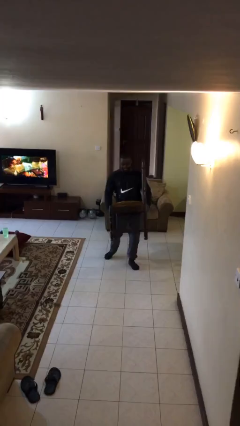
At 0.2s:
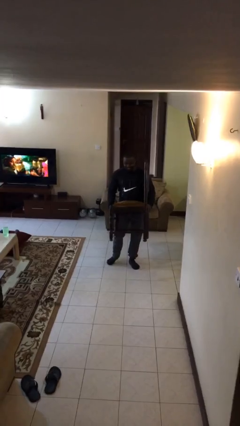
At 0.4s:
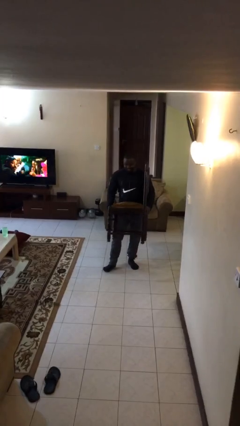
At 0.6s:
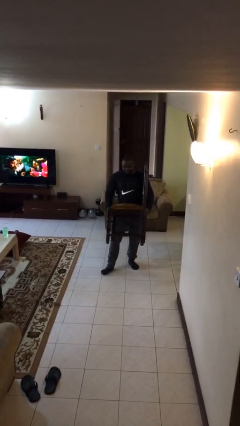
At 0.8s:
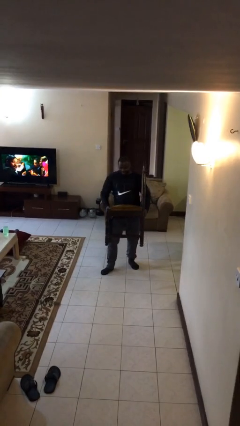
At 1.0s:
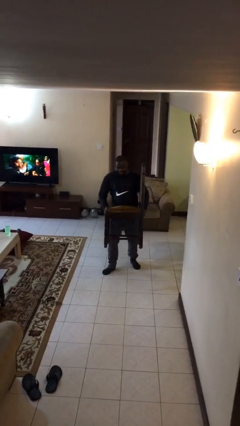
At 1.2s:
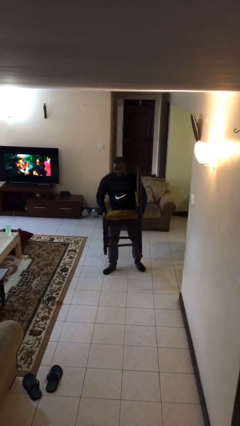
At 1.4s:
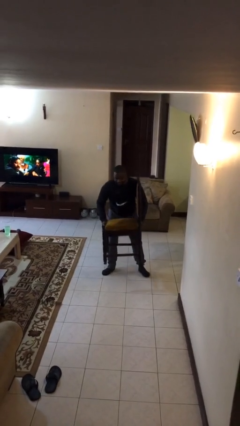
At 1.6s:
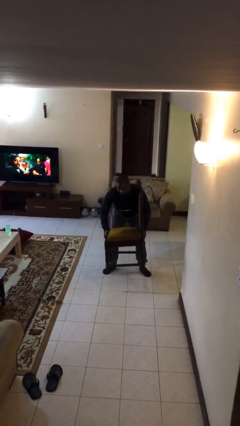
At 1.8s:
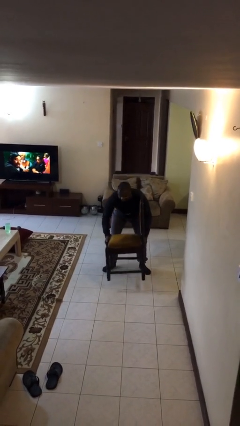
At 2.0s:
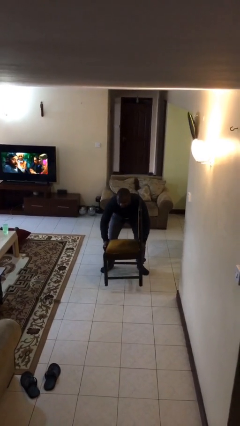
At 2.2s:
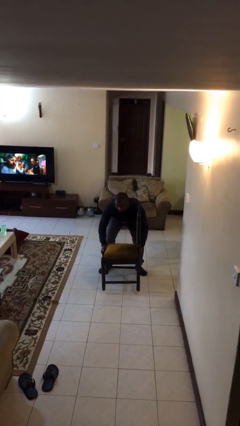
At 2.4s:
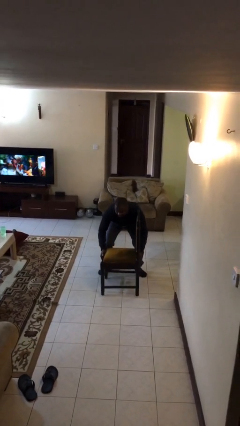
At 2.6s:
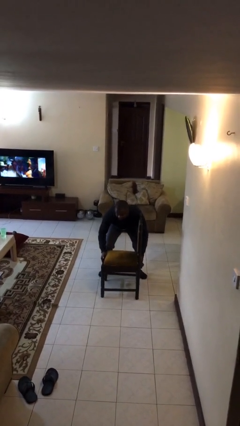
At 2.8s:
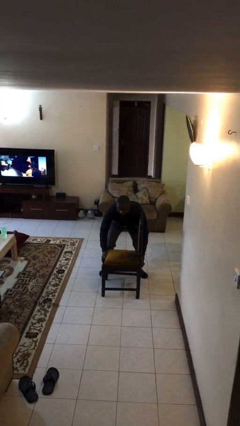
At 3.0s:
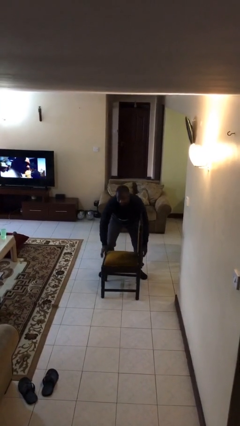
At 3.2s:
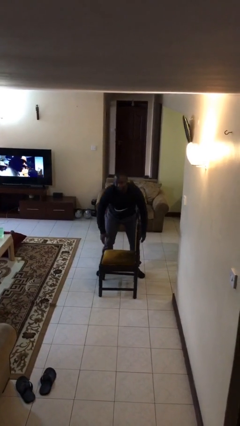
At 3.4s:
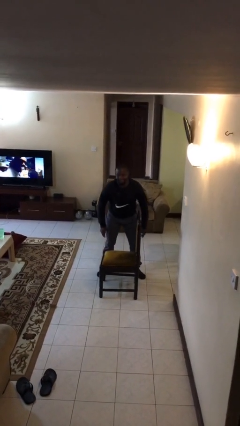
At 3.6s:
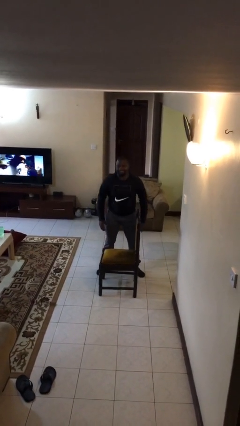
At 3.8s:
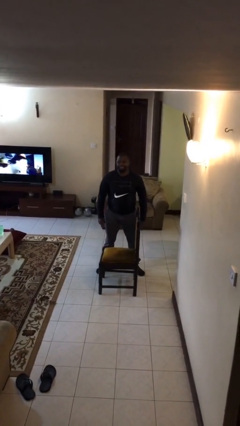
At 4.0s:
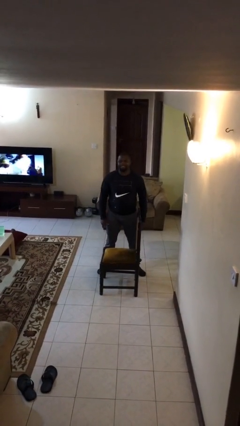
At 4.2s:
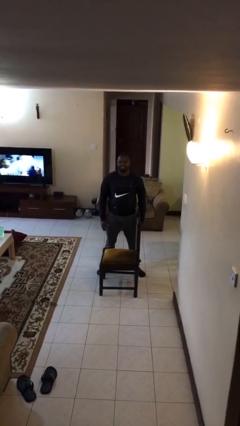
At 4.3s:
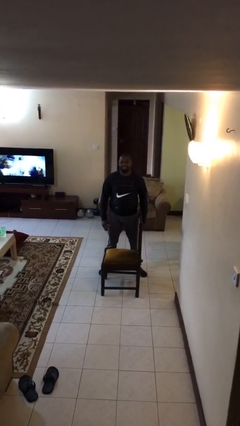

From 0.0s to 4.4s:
person puts down object on floor

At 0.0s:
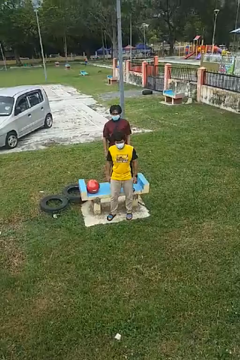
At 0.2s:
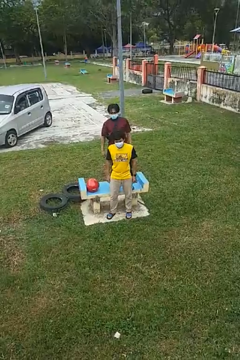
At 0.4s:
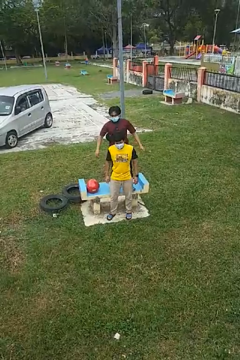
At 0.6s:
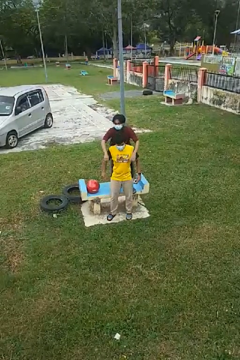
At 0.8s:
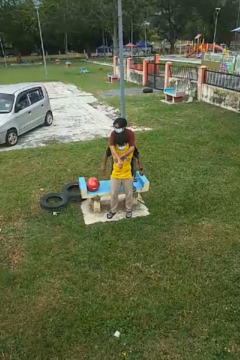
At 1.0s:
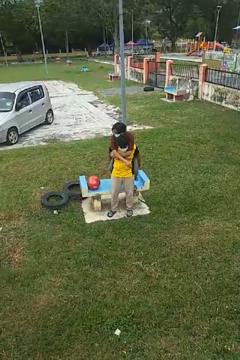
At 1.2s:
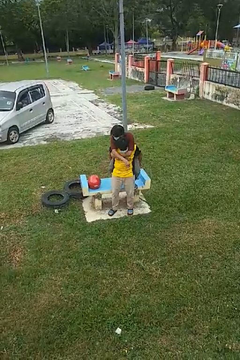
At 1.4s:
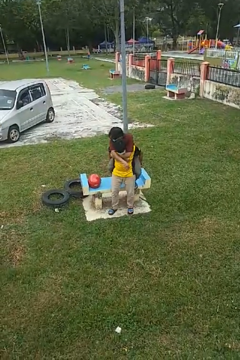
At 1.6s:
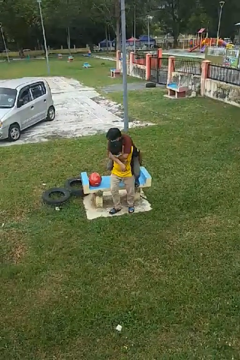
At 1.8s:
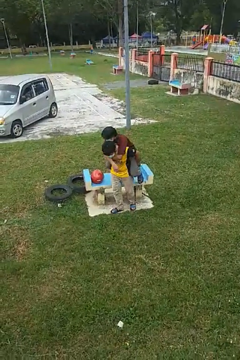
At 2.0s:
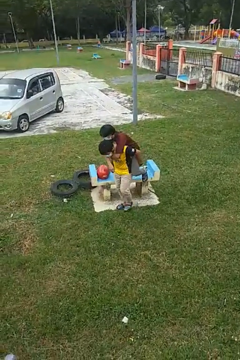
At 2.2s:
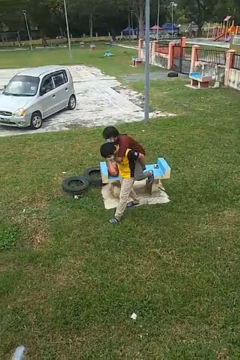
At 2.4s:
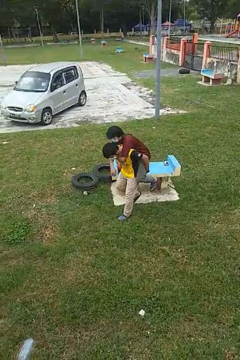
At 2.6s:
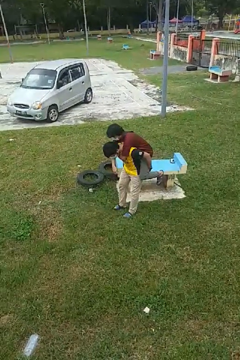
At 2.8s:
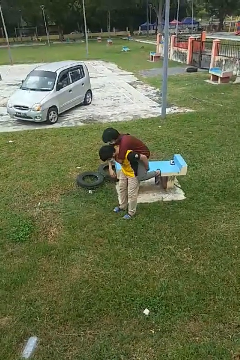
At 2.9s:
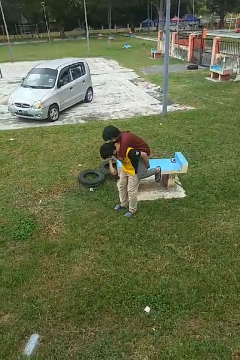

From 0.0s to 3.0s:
person carries person over shoulder

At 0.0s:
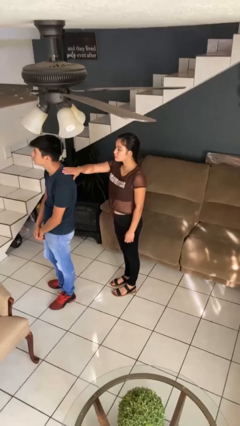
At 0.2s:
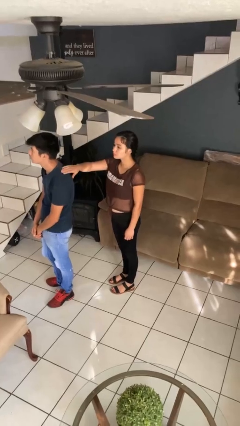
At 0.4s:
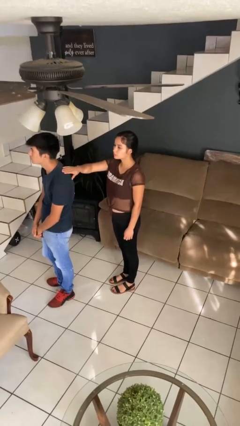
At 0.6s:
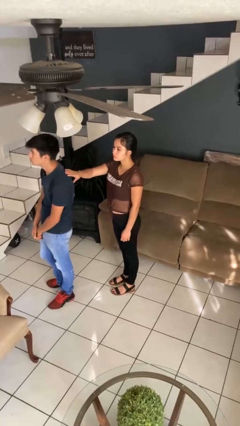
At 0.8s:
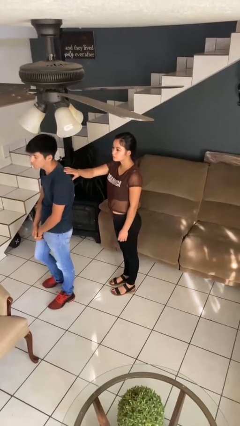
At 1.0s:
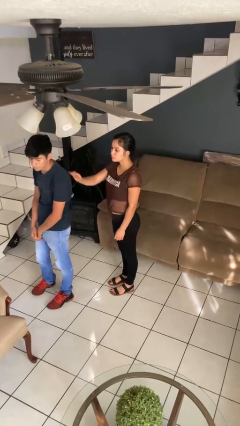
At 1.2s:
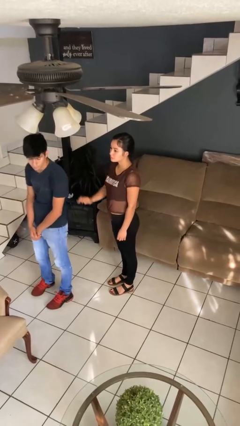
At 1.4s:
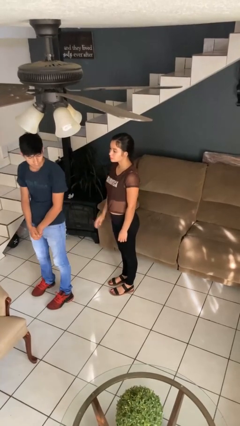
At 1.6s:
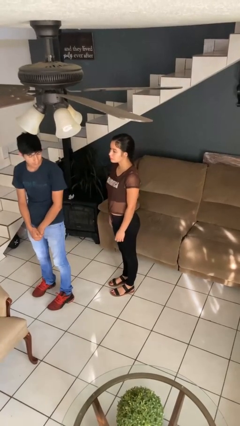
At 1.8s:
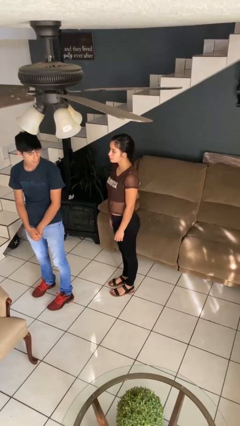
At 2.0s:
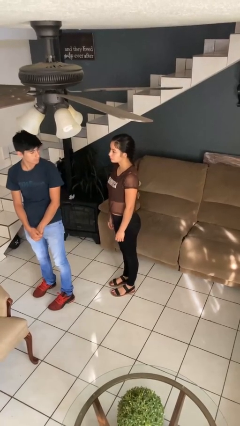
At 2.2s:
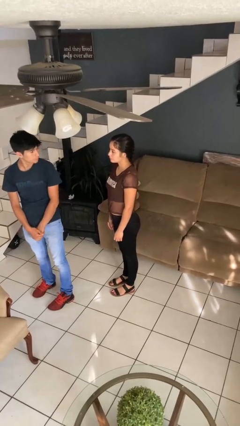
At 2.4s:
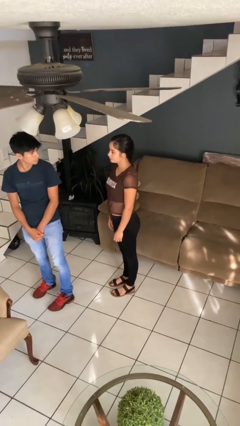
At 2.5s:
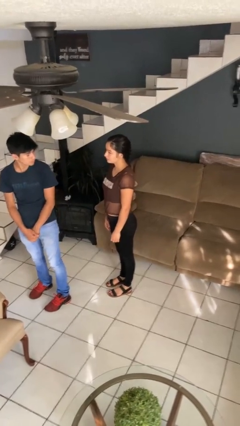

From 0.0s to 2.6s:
person pounds shoulders of person

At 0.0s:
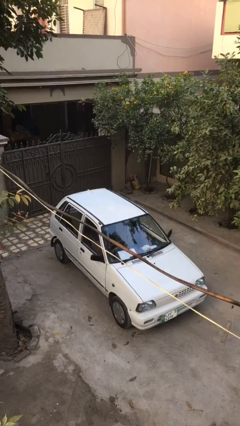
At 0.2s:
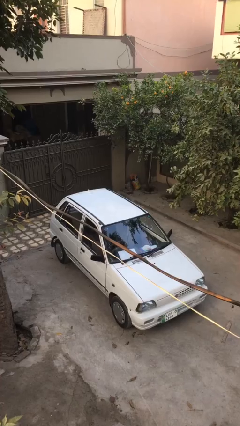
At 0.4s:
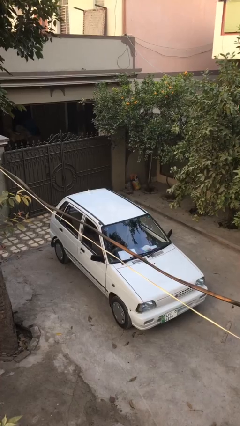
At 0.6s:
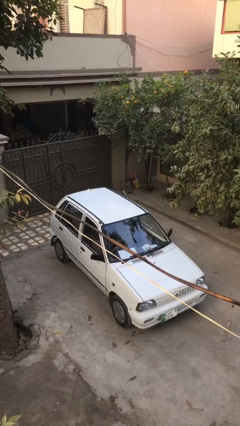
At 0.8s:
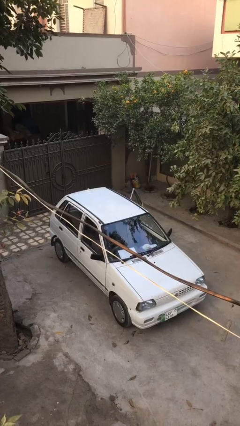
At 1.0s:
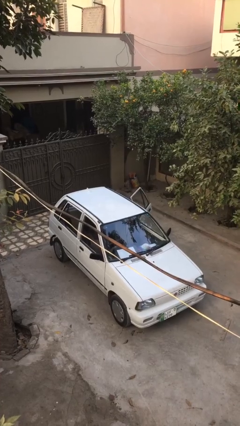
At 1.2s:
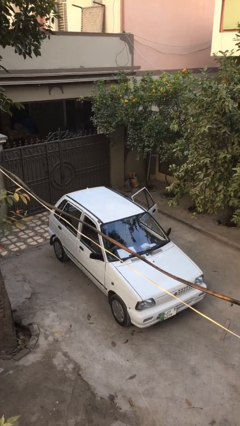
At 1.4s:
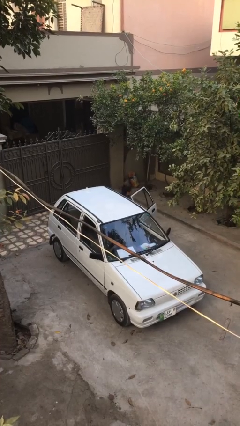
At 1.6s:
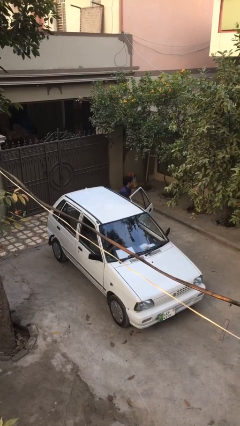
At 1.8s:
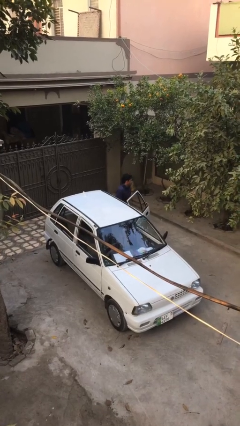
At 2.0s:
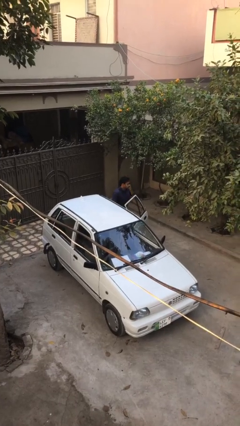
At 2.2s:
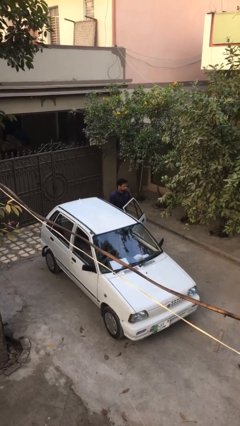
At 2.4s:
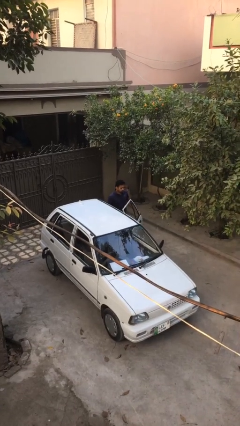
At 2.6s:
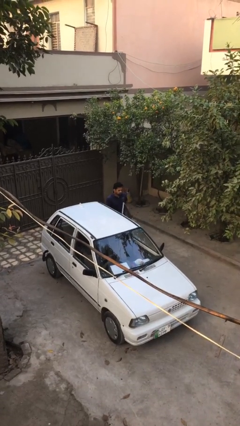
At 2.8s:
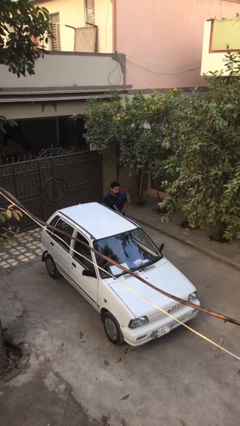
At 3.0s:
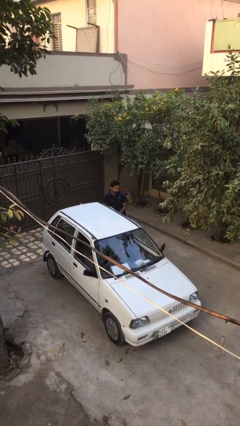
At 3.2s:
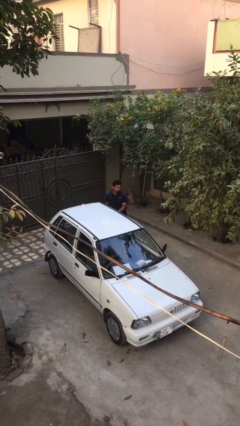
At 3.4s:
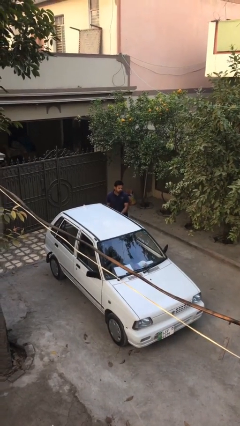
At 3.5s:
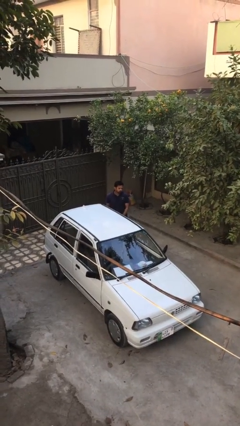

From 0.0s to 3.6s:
person exits car

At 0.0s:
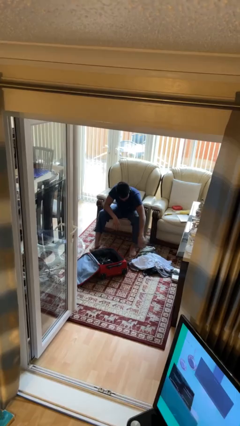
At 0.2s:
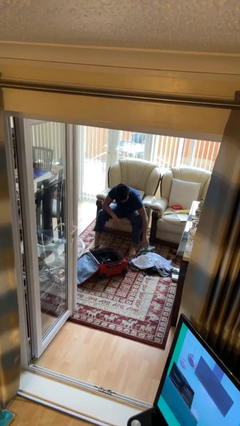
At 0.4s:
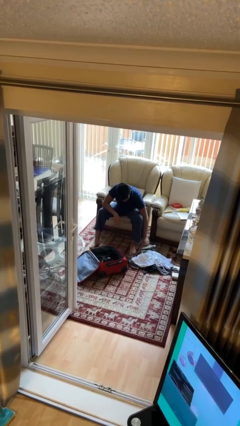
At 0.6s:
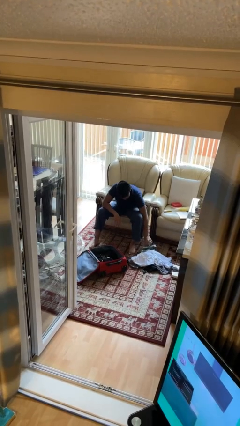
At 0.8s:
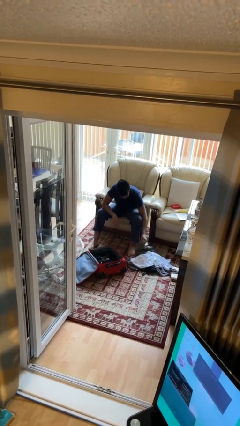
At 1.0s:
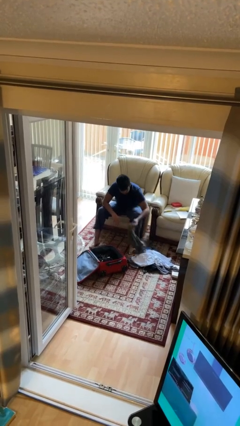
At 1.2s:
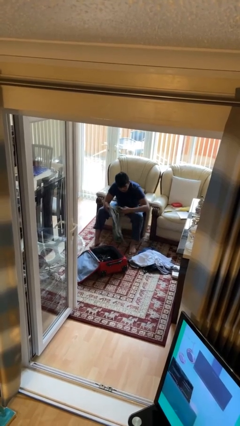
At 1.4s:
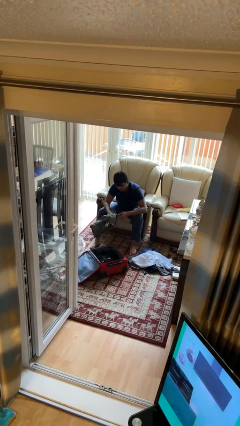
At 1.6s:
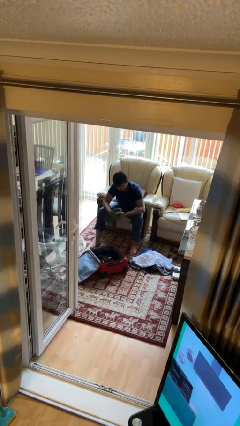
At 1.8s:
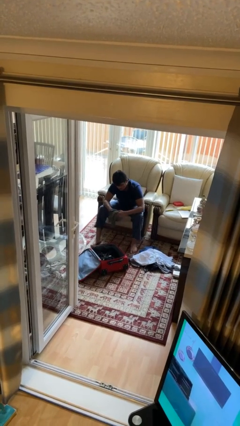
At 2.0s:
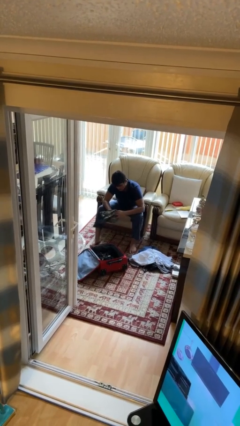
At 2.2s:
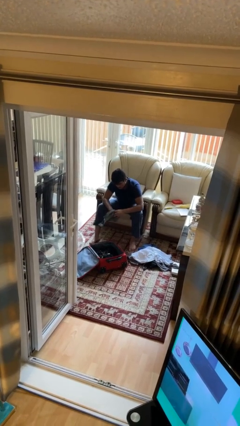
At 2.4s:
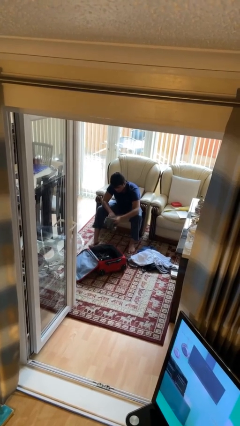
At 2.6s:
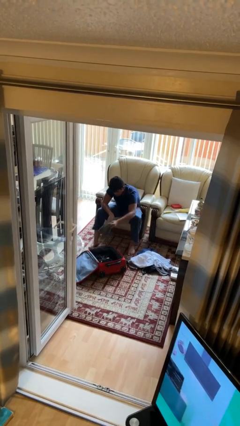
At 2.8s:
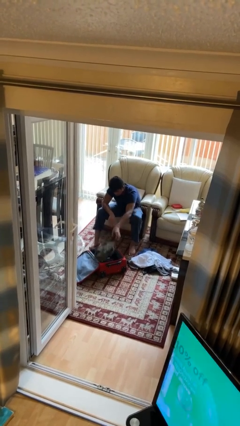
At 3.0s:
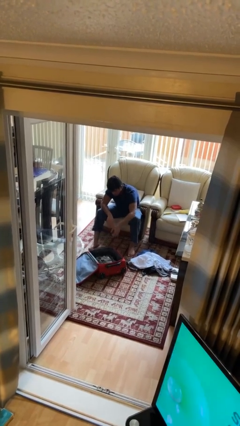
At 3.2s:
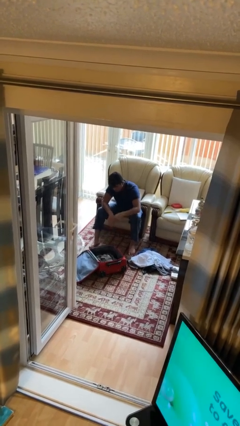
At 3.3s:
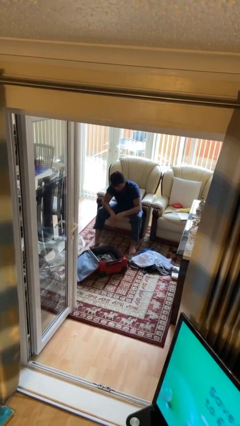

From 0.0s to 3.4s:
person loads clothes into suitcase

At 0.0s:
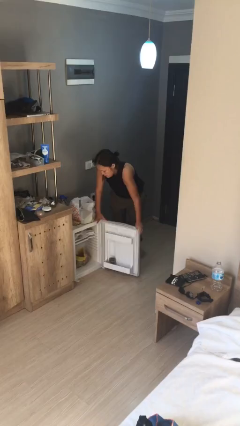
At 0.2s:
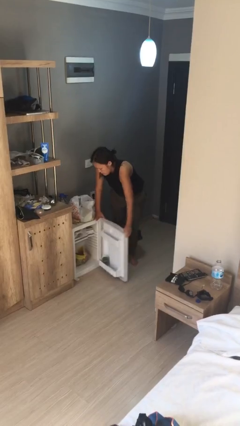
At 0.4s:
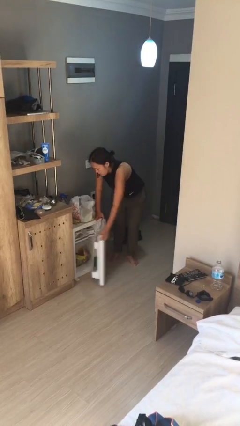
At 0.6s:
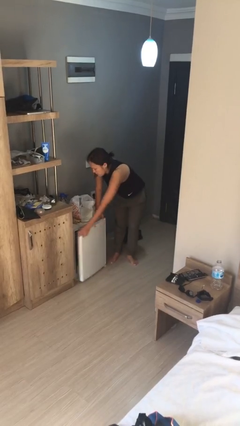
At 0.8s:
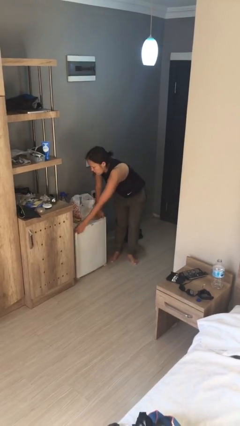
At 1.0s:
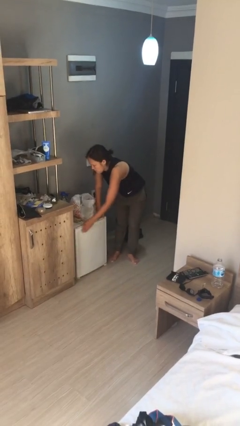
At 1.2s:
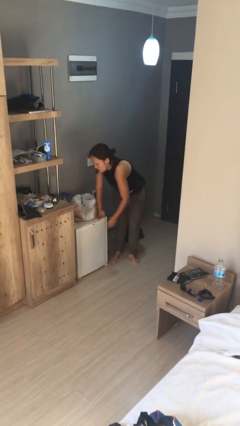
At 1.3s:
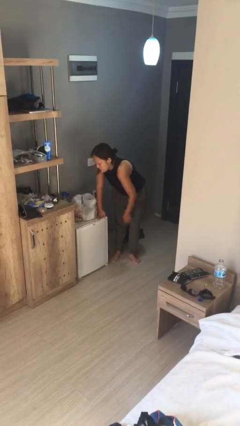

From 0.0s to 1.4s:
person closes refrigerator
